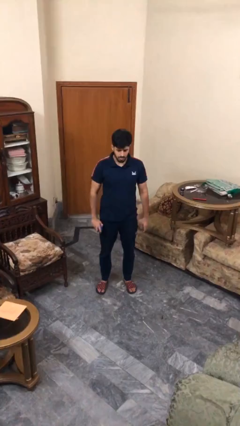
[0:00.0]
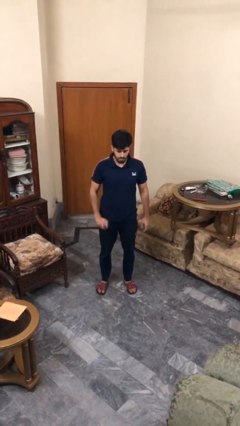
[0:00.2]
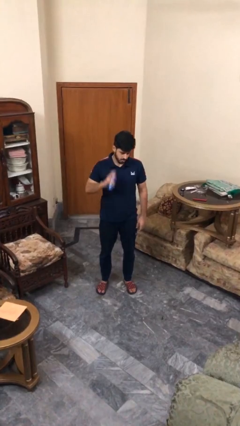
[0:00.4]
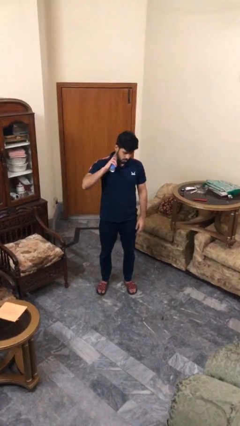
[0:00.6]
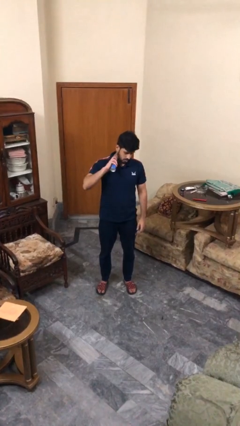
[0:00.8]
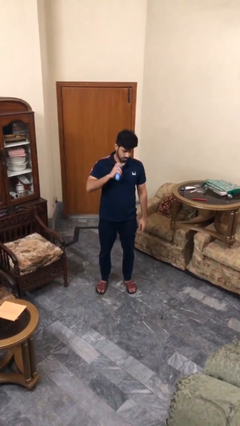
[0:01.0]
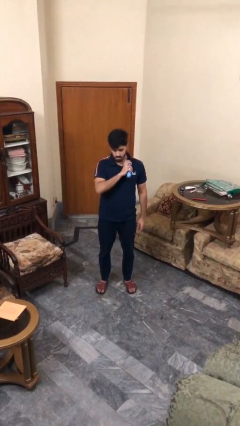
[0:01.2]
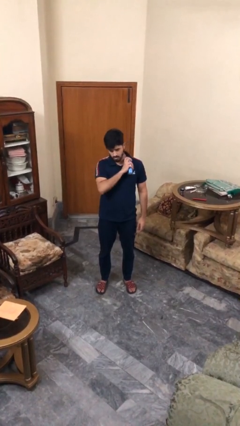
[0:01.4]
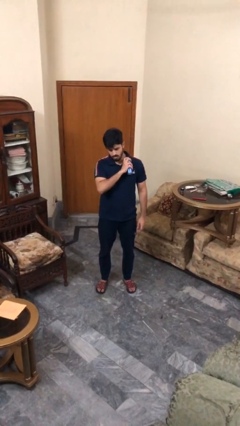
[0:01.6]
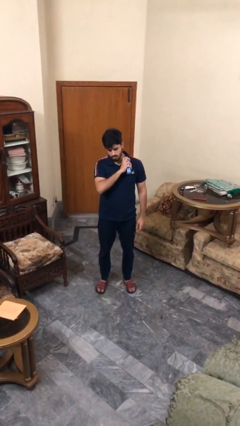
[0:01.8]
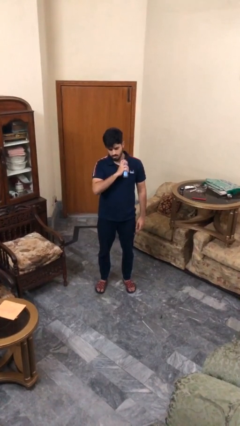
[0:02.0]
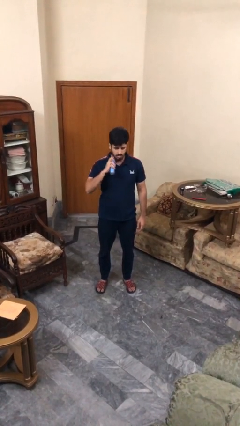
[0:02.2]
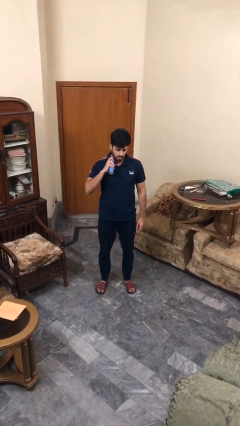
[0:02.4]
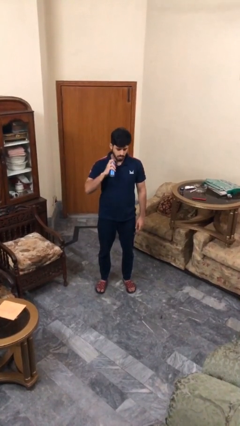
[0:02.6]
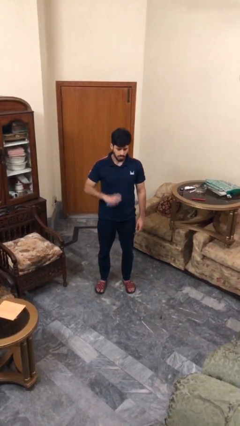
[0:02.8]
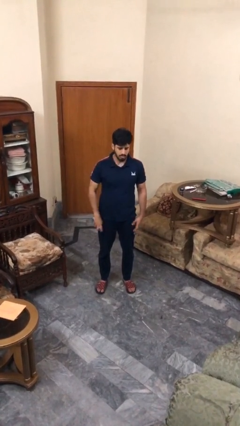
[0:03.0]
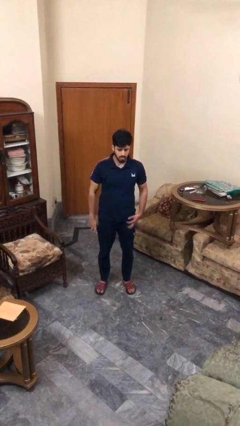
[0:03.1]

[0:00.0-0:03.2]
person applies deodorant

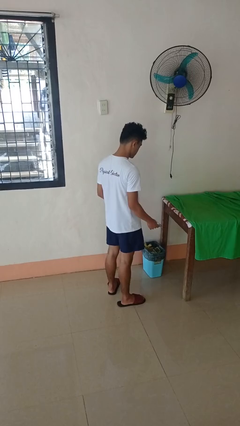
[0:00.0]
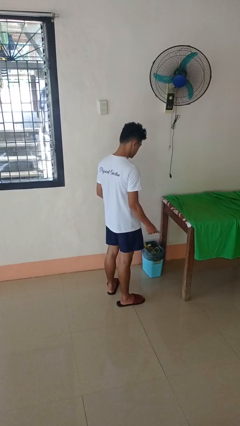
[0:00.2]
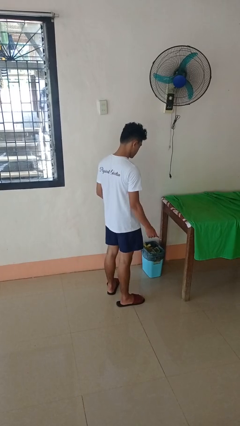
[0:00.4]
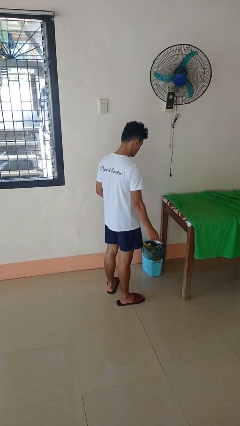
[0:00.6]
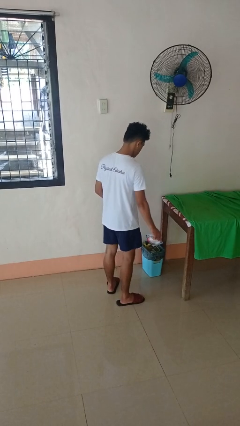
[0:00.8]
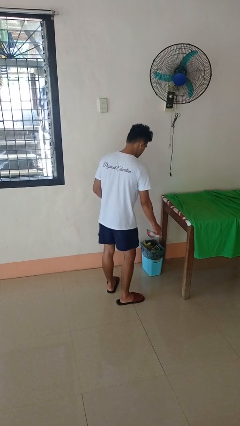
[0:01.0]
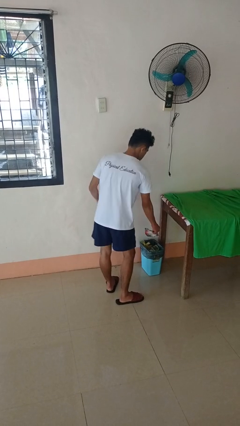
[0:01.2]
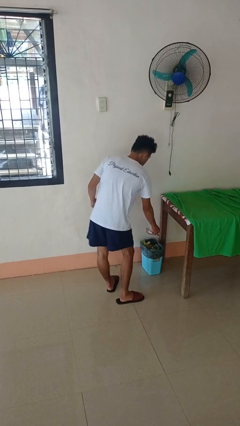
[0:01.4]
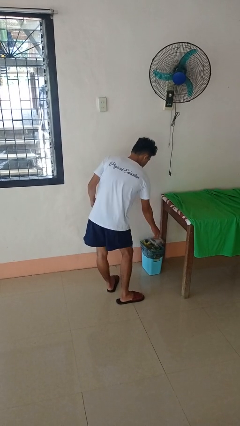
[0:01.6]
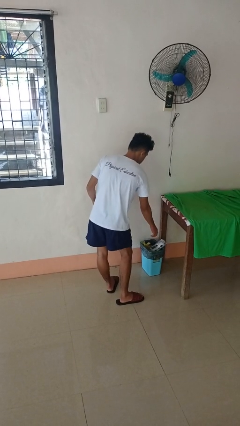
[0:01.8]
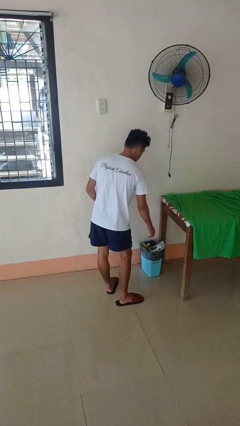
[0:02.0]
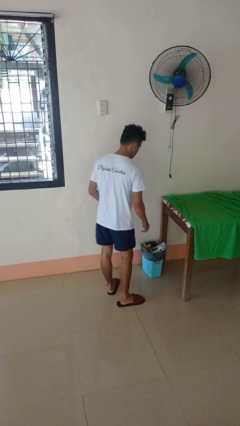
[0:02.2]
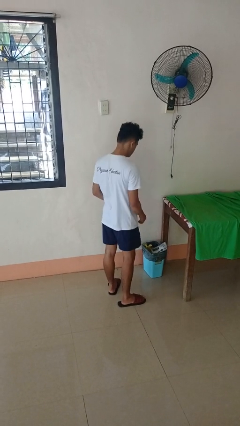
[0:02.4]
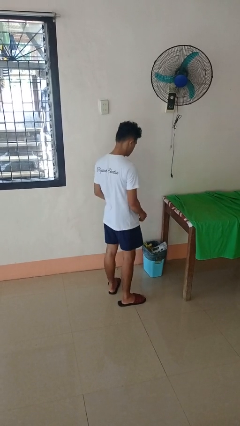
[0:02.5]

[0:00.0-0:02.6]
person discards trash

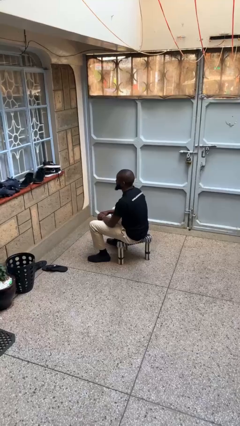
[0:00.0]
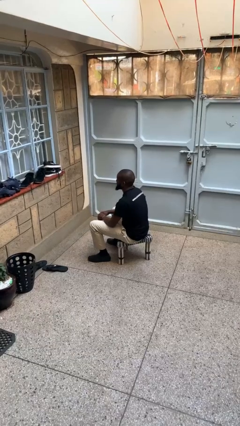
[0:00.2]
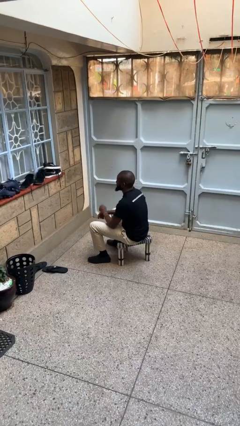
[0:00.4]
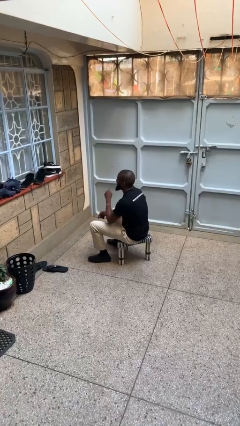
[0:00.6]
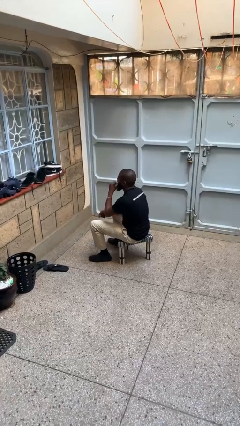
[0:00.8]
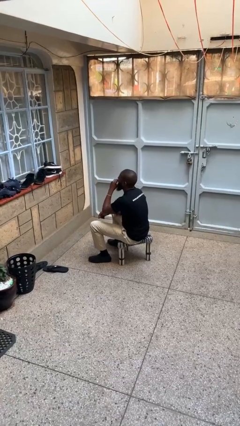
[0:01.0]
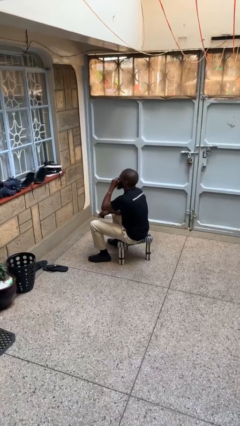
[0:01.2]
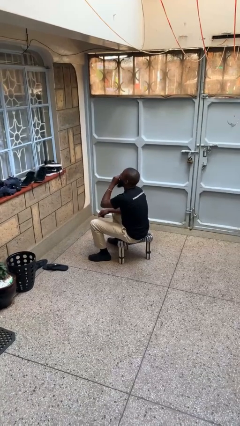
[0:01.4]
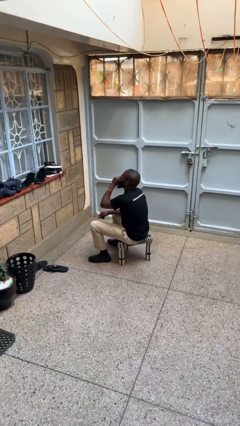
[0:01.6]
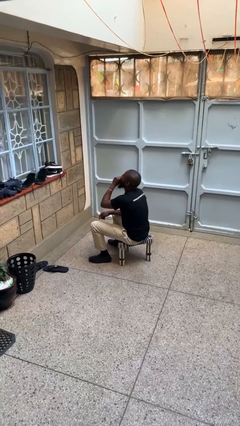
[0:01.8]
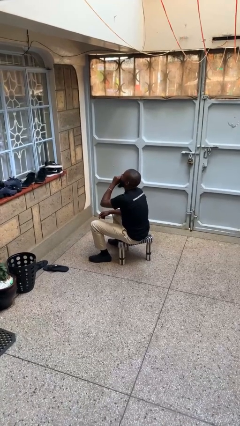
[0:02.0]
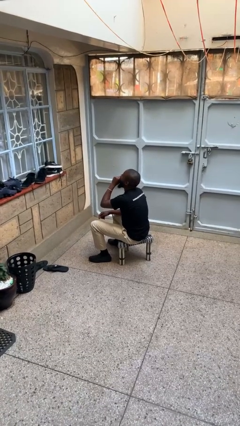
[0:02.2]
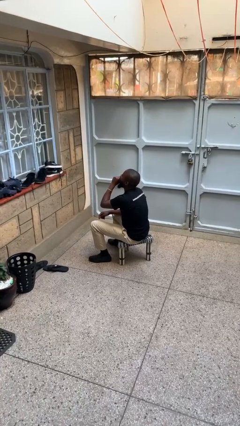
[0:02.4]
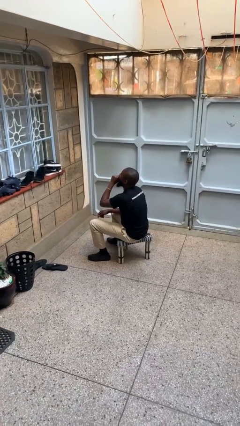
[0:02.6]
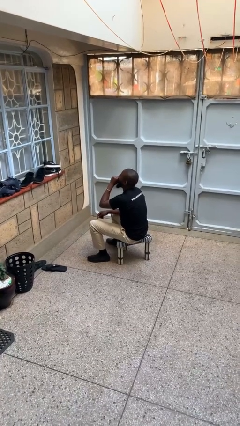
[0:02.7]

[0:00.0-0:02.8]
person yawns

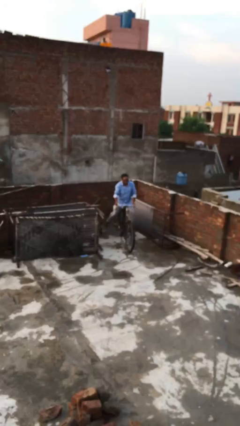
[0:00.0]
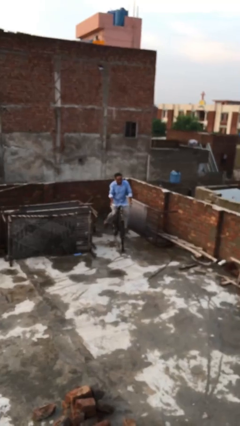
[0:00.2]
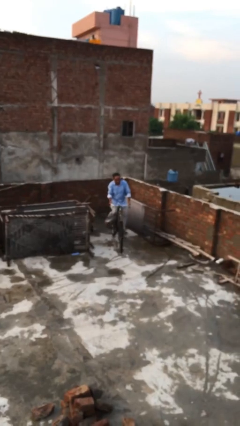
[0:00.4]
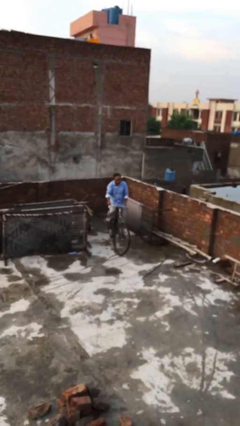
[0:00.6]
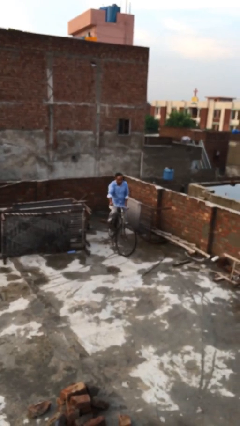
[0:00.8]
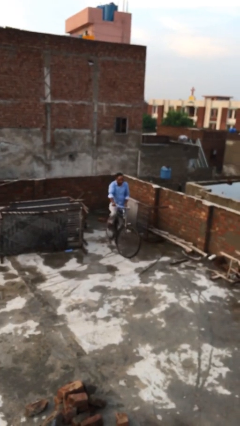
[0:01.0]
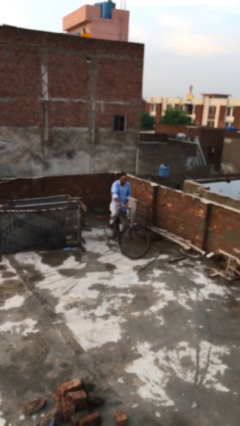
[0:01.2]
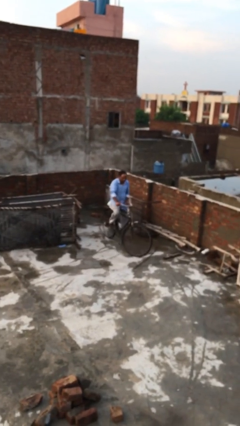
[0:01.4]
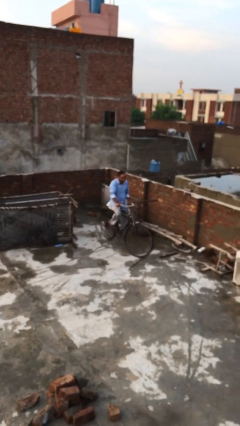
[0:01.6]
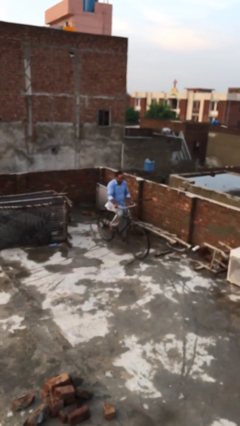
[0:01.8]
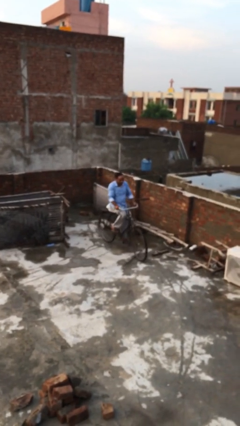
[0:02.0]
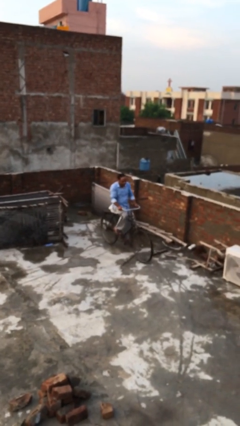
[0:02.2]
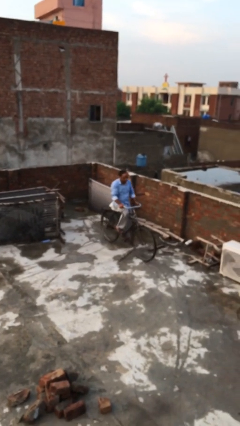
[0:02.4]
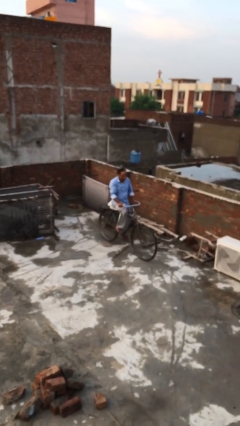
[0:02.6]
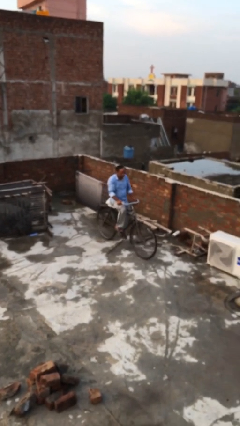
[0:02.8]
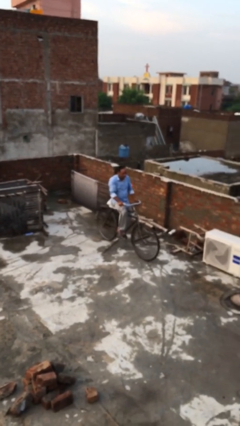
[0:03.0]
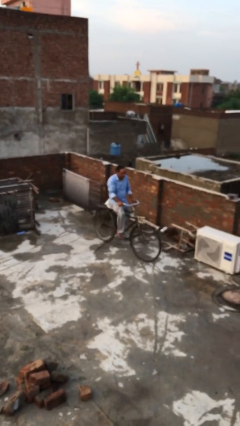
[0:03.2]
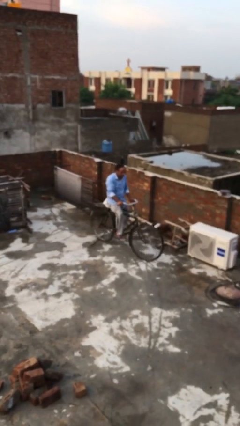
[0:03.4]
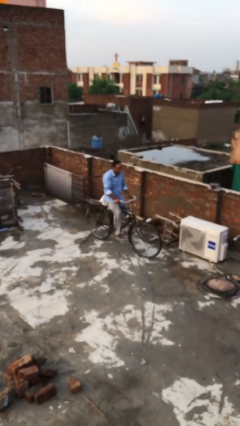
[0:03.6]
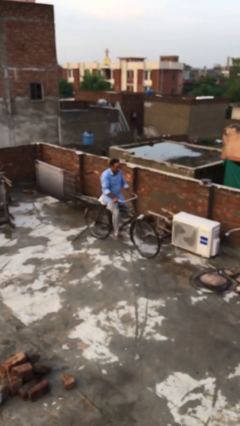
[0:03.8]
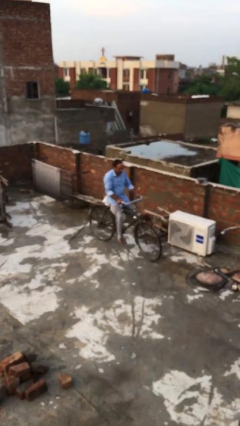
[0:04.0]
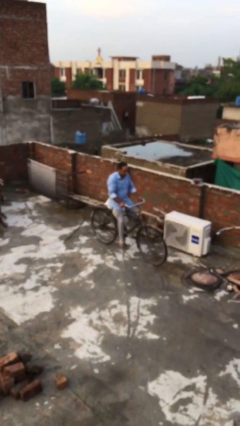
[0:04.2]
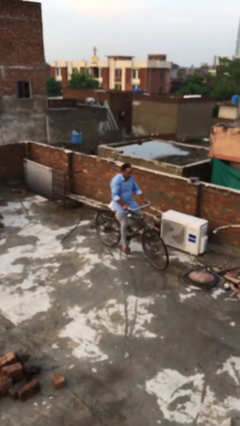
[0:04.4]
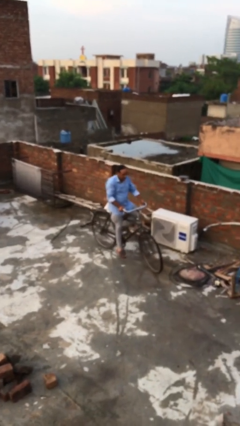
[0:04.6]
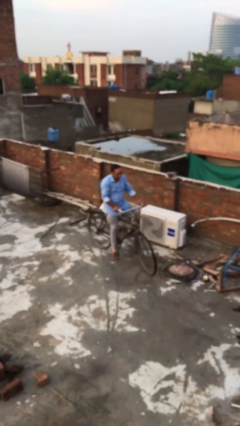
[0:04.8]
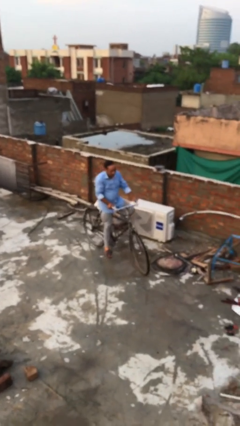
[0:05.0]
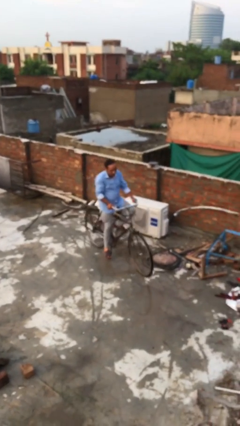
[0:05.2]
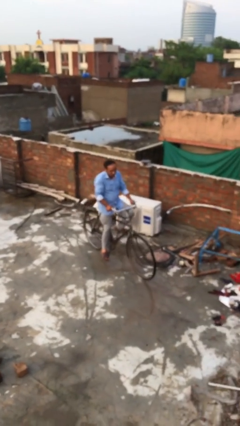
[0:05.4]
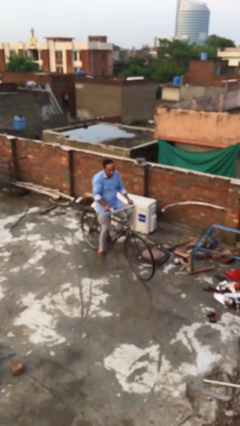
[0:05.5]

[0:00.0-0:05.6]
person rides bicycle

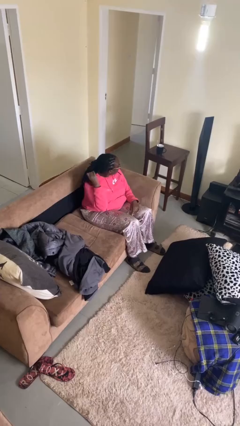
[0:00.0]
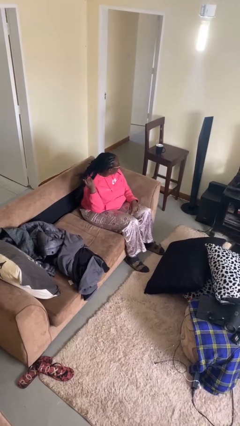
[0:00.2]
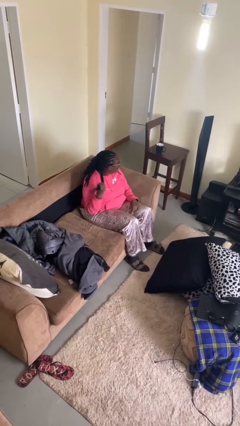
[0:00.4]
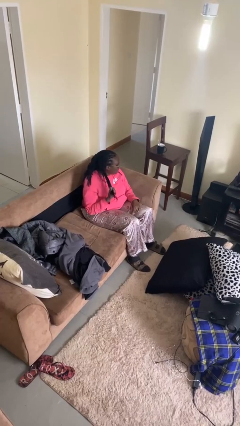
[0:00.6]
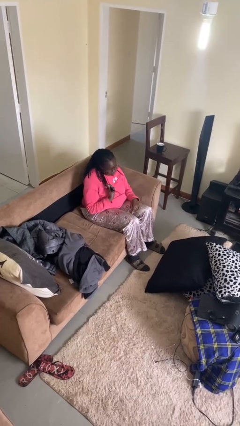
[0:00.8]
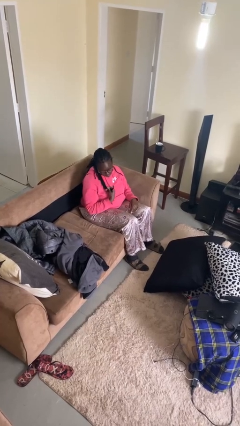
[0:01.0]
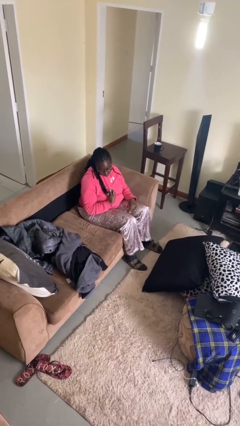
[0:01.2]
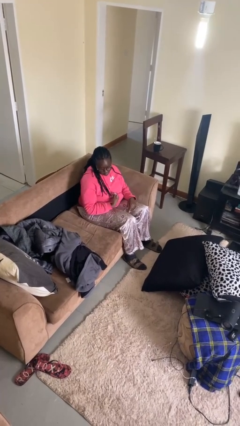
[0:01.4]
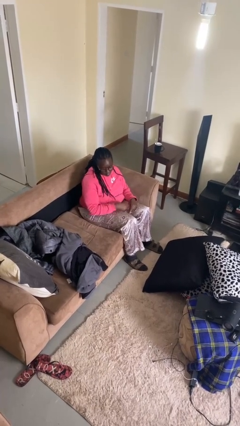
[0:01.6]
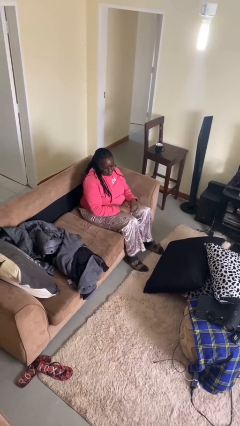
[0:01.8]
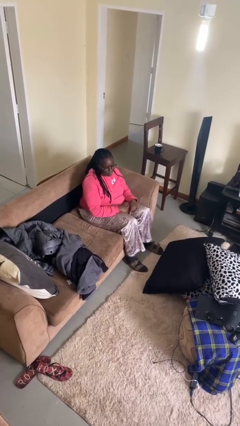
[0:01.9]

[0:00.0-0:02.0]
person strokes hair

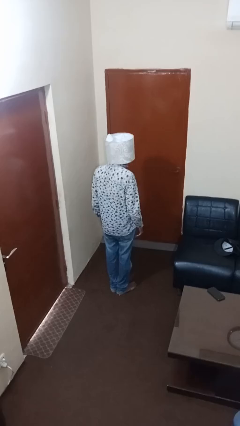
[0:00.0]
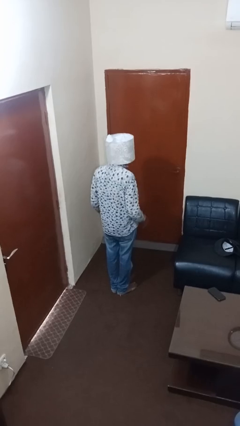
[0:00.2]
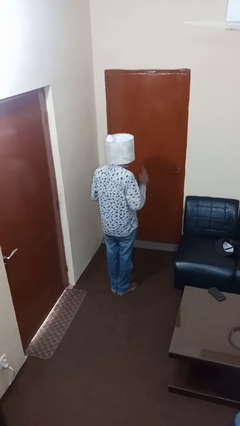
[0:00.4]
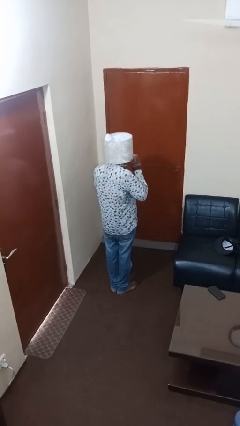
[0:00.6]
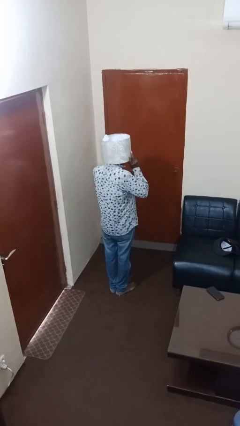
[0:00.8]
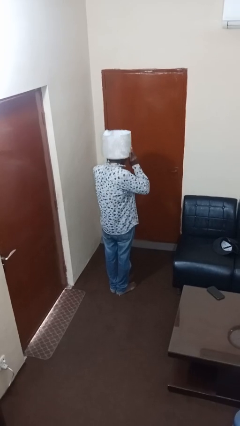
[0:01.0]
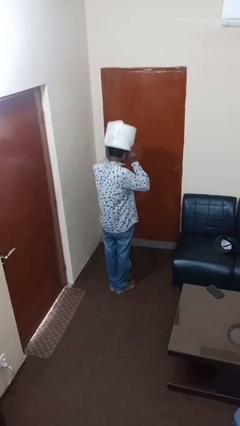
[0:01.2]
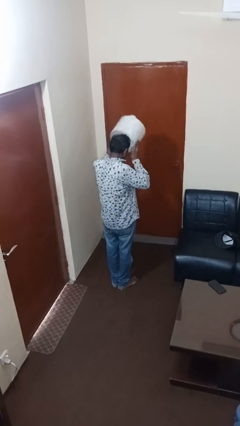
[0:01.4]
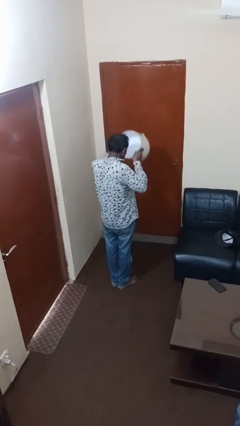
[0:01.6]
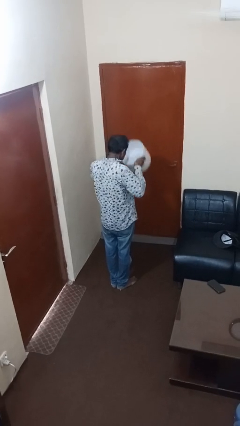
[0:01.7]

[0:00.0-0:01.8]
person takes off hat
